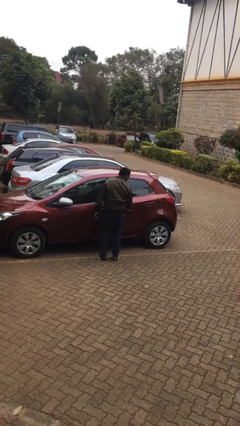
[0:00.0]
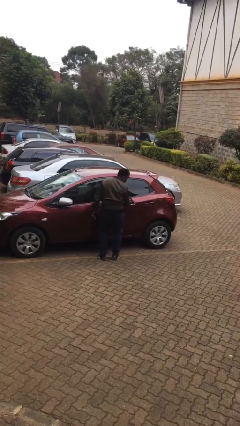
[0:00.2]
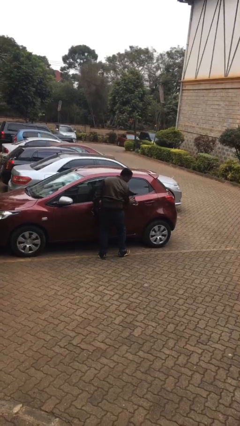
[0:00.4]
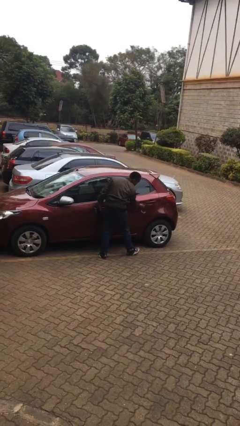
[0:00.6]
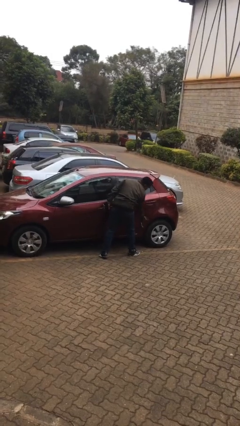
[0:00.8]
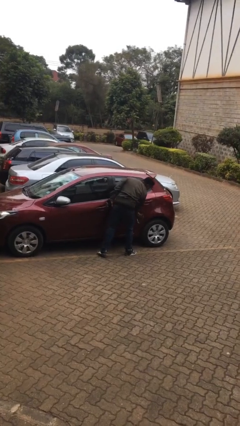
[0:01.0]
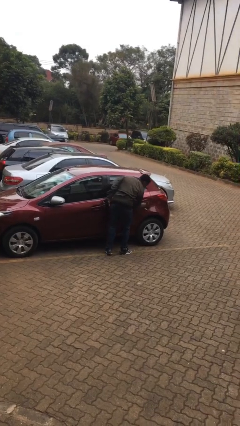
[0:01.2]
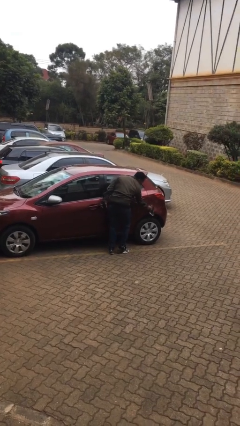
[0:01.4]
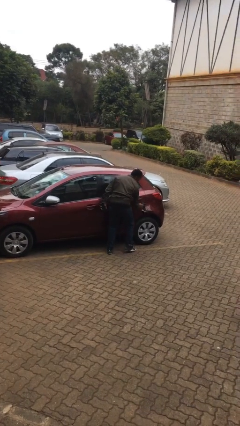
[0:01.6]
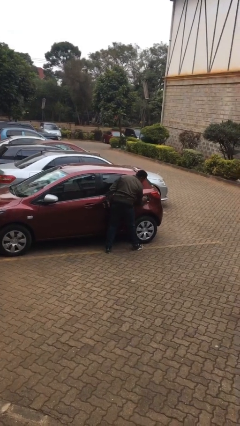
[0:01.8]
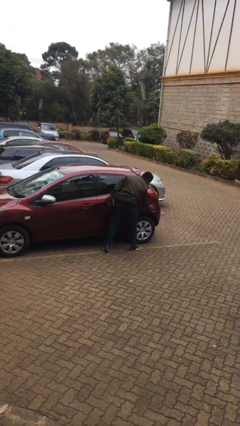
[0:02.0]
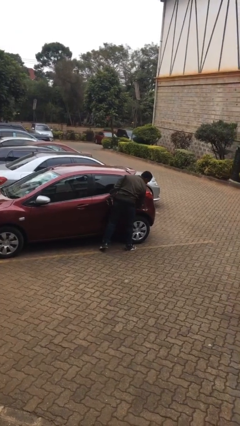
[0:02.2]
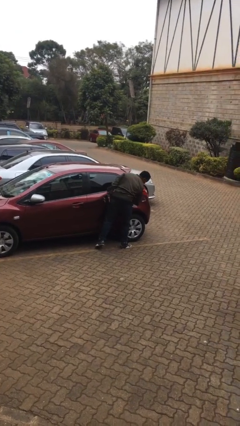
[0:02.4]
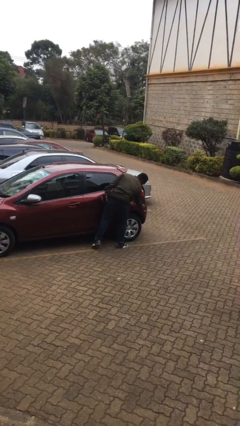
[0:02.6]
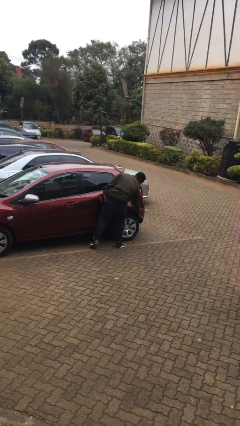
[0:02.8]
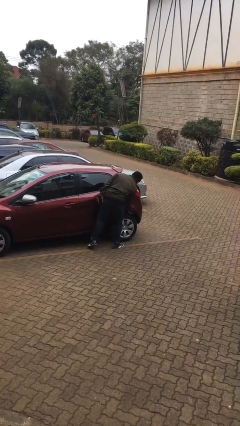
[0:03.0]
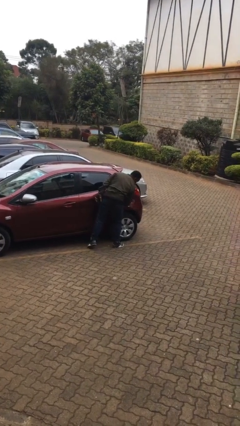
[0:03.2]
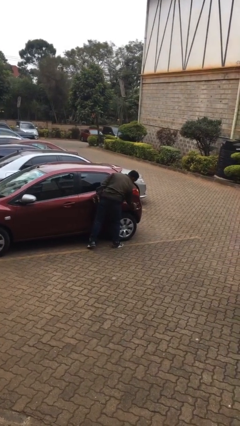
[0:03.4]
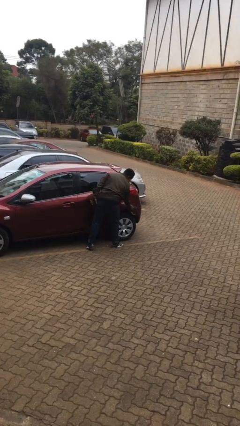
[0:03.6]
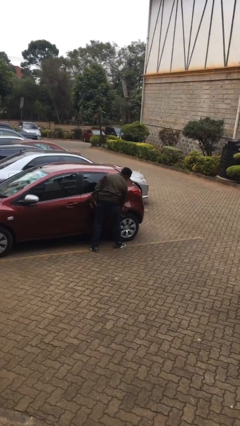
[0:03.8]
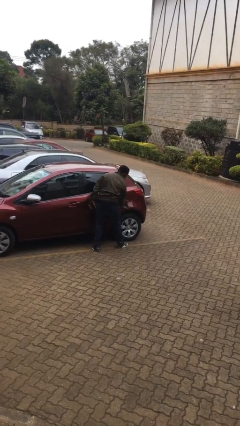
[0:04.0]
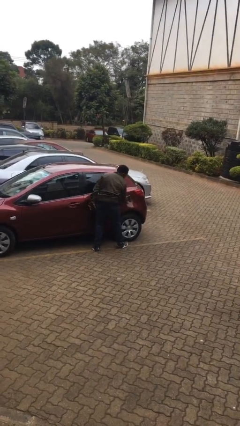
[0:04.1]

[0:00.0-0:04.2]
person polishes car with rag

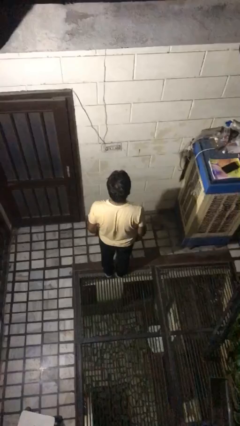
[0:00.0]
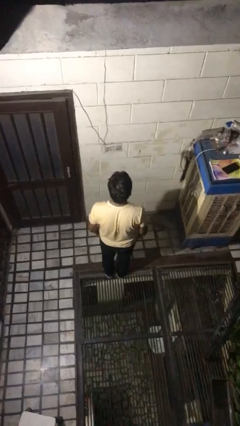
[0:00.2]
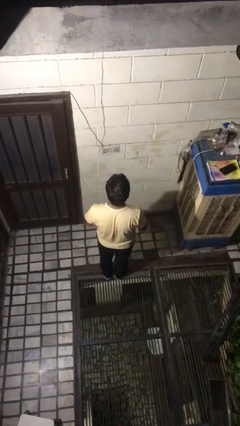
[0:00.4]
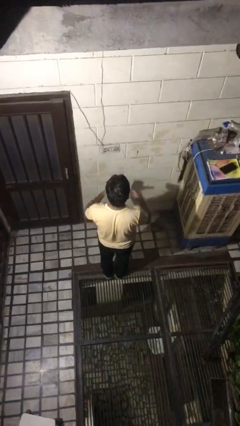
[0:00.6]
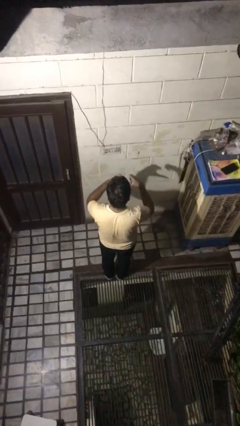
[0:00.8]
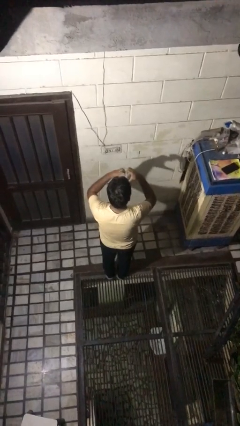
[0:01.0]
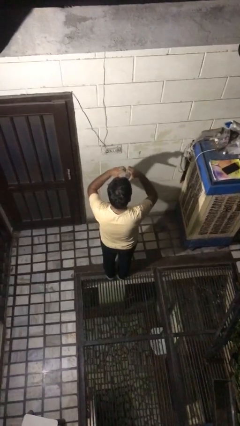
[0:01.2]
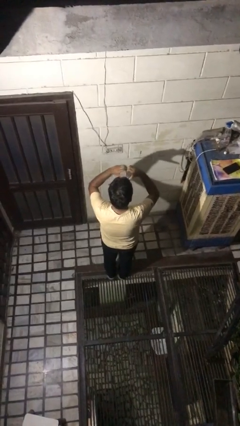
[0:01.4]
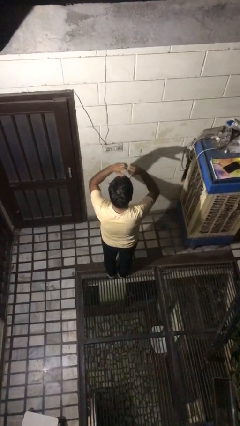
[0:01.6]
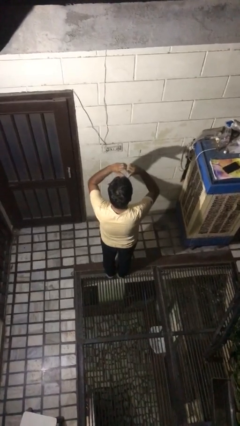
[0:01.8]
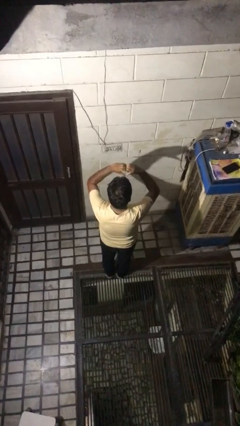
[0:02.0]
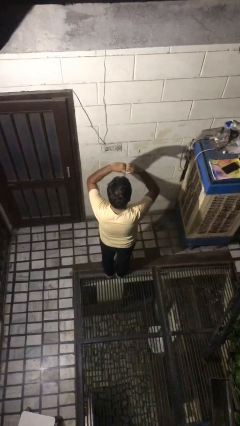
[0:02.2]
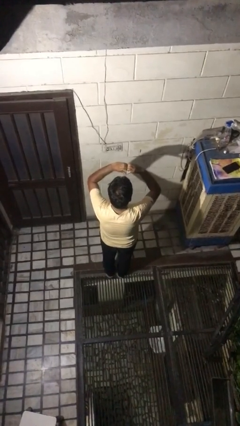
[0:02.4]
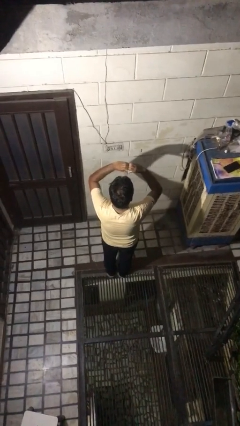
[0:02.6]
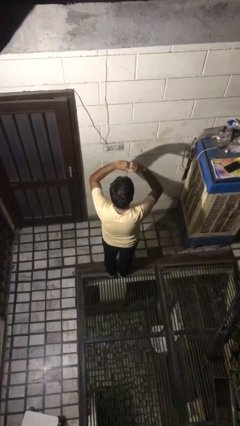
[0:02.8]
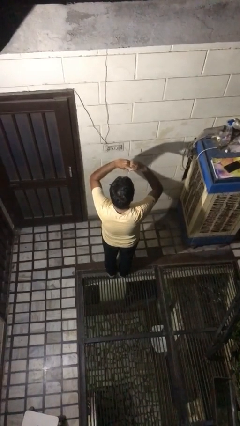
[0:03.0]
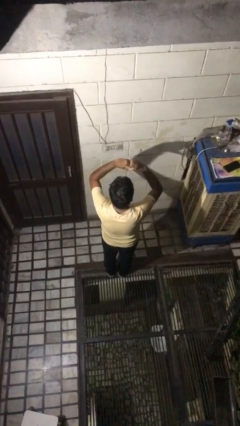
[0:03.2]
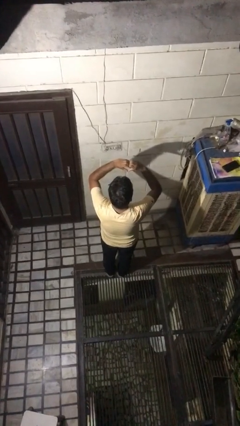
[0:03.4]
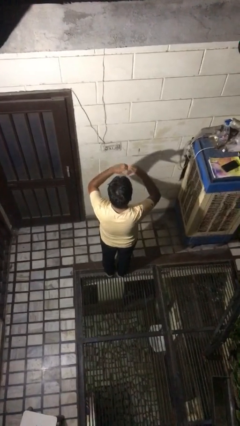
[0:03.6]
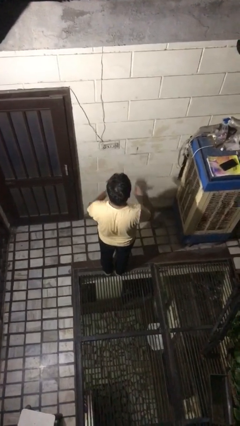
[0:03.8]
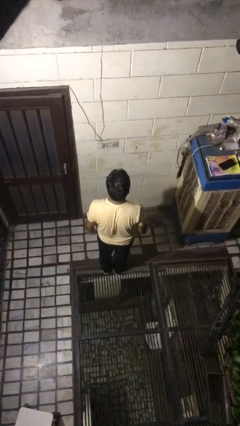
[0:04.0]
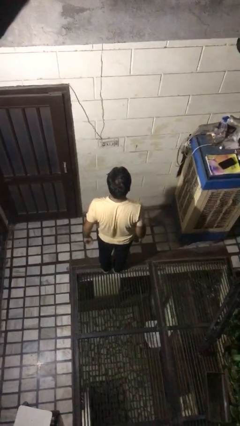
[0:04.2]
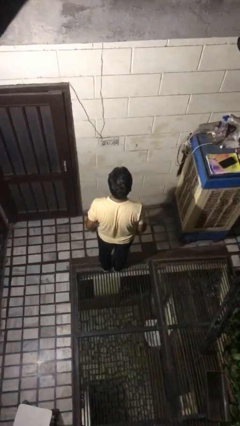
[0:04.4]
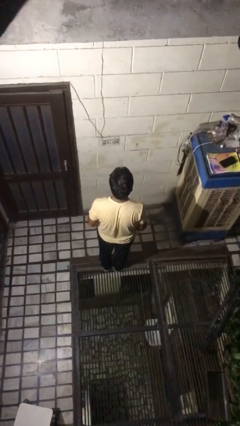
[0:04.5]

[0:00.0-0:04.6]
person gestures heart

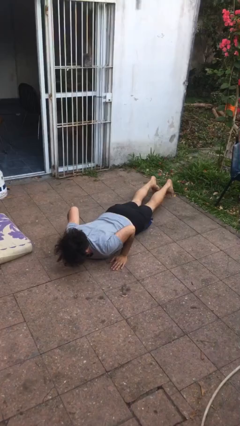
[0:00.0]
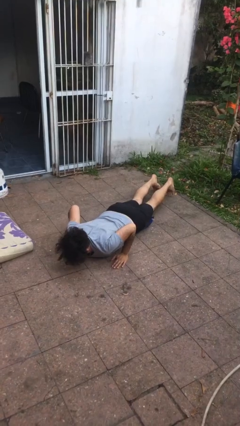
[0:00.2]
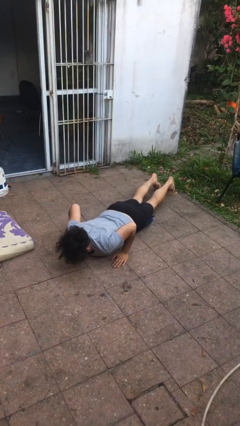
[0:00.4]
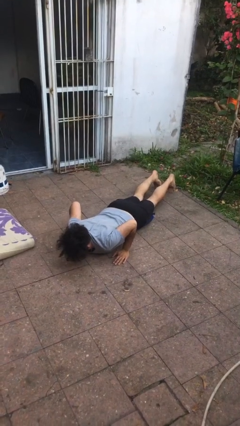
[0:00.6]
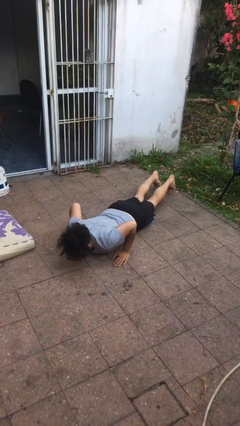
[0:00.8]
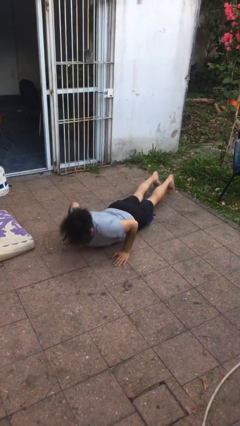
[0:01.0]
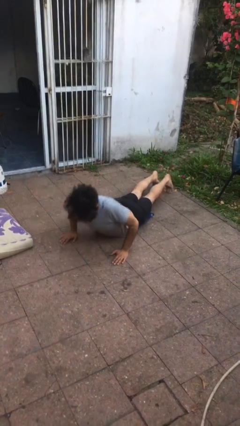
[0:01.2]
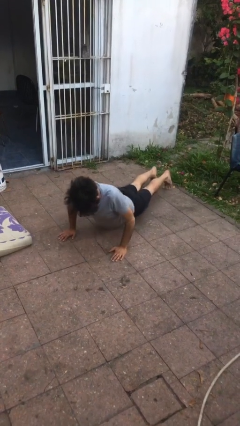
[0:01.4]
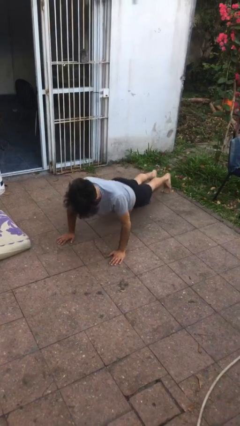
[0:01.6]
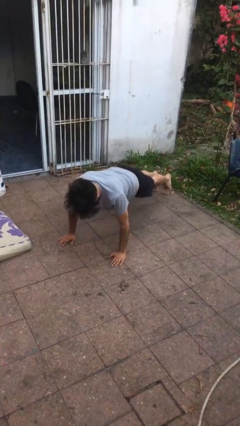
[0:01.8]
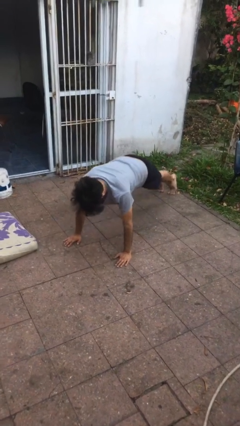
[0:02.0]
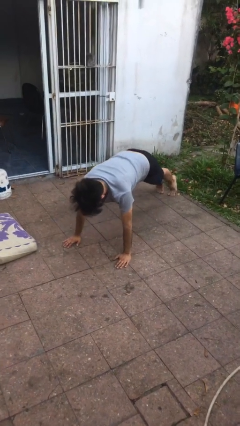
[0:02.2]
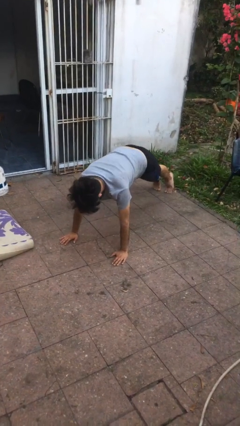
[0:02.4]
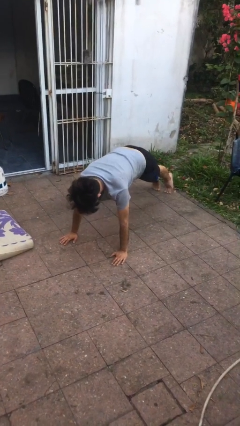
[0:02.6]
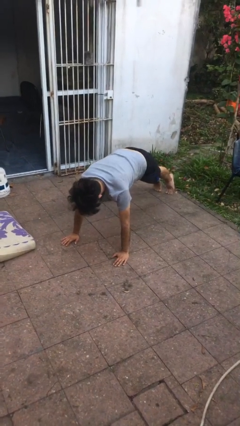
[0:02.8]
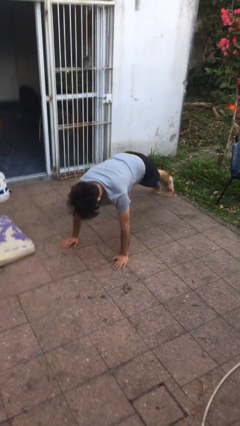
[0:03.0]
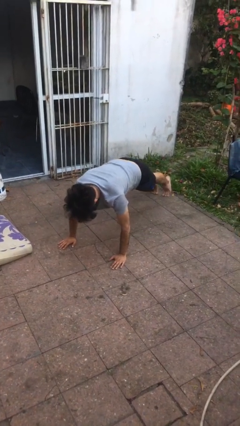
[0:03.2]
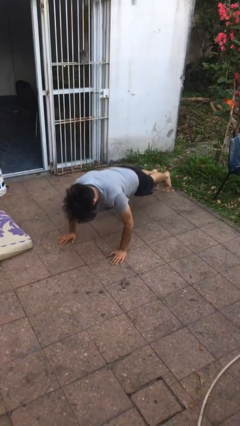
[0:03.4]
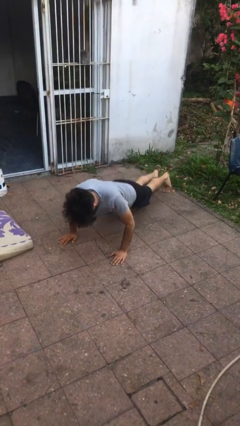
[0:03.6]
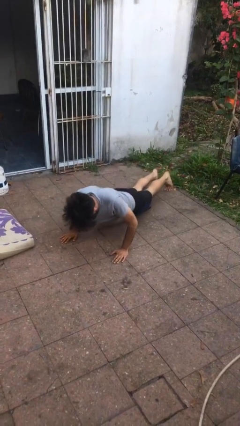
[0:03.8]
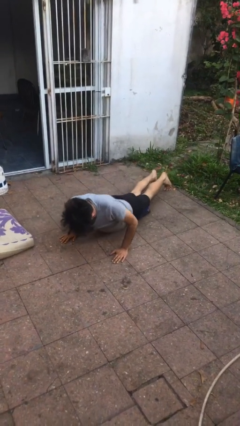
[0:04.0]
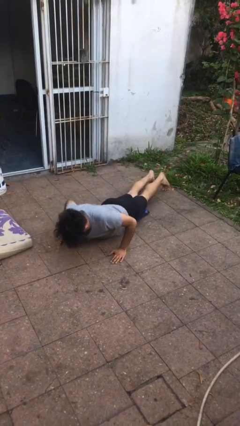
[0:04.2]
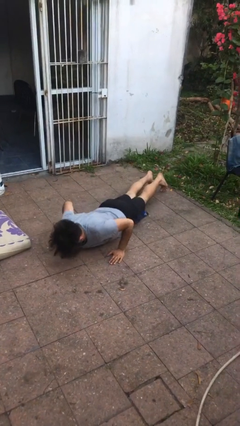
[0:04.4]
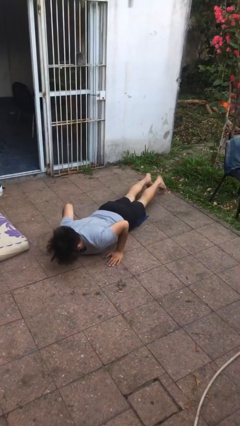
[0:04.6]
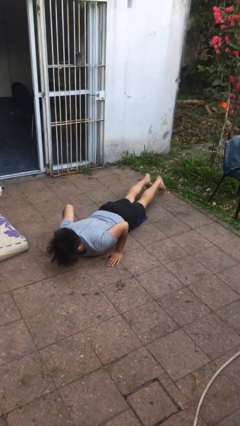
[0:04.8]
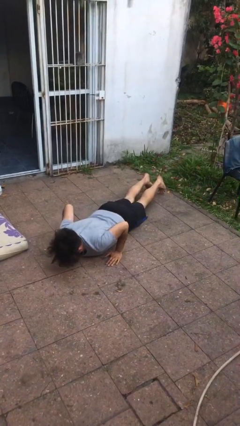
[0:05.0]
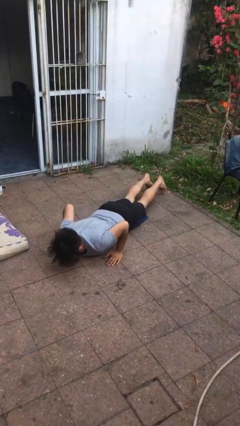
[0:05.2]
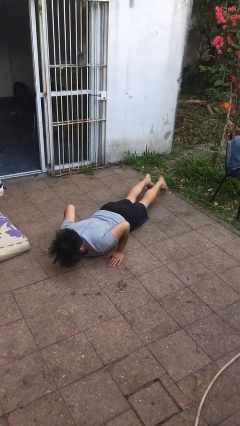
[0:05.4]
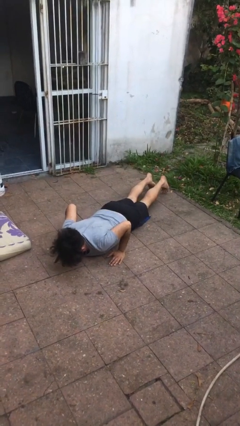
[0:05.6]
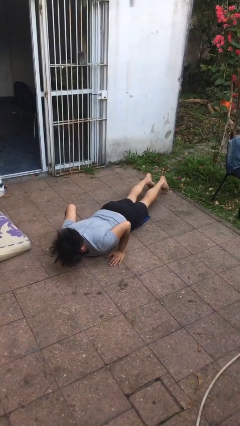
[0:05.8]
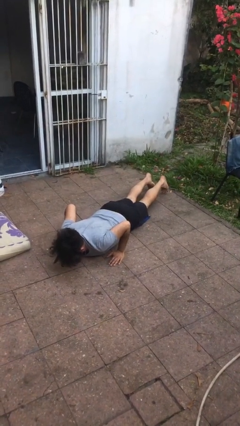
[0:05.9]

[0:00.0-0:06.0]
person exercises with pushup

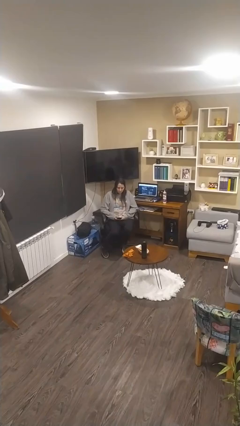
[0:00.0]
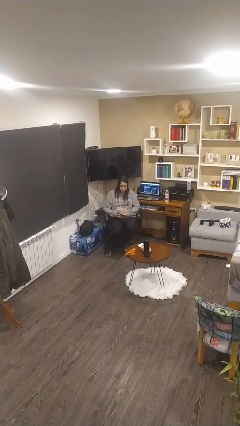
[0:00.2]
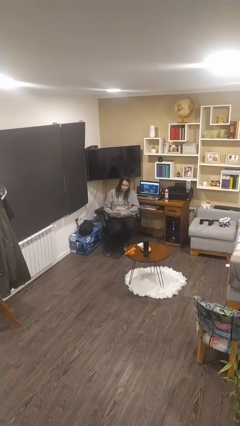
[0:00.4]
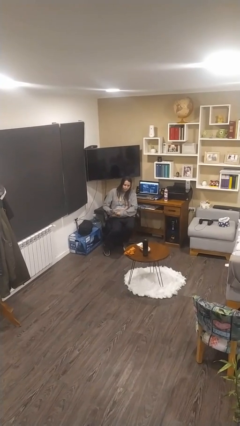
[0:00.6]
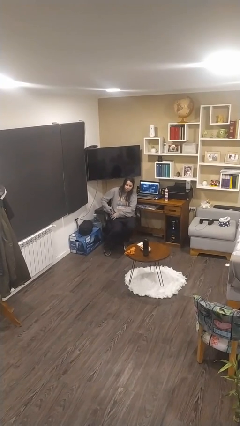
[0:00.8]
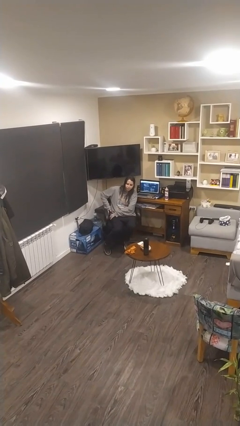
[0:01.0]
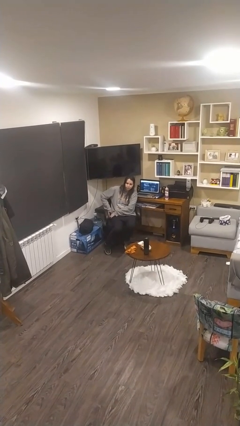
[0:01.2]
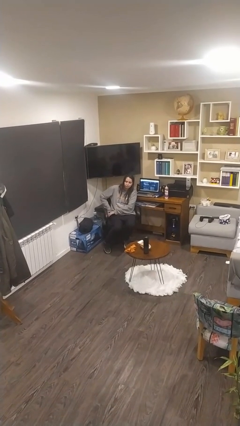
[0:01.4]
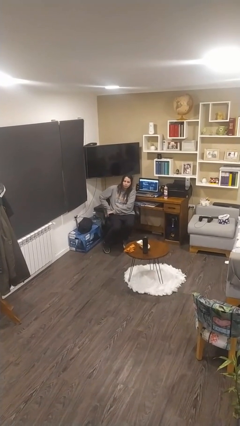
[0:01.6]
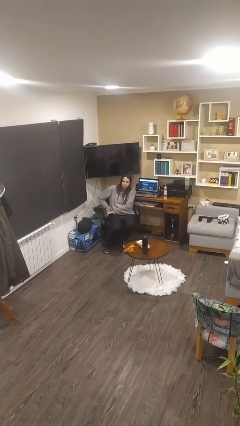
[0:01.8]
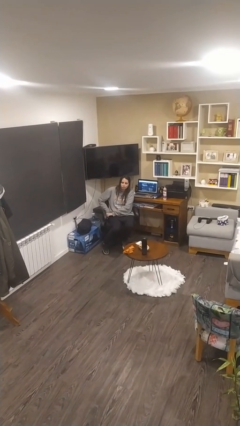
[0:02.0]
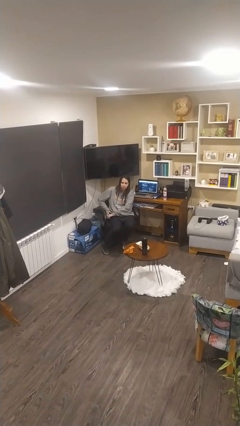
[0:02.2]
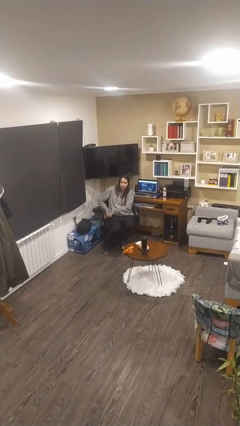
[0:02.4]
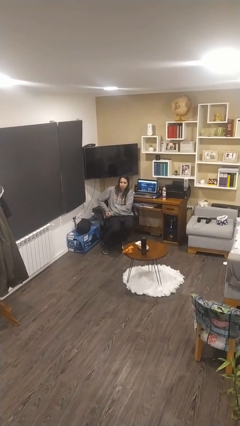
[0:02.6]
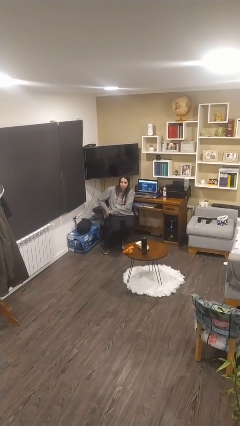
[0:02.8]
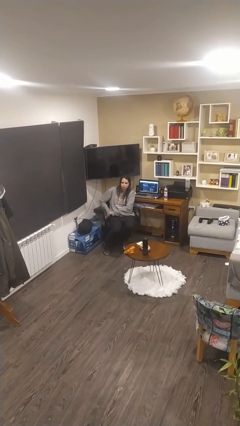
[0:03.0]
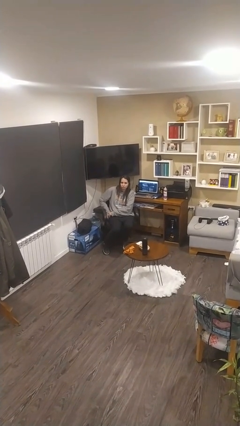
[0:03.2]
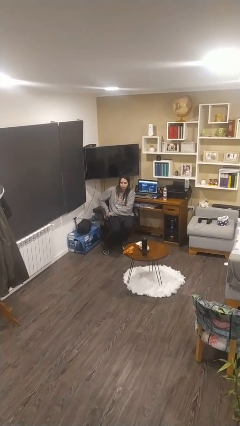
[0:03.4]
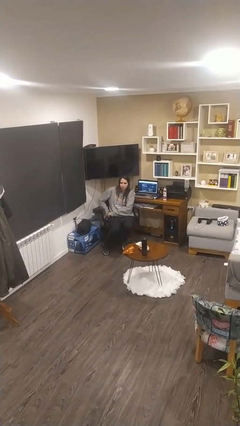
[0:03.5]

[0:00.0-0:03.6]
person puts phone into pocket
